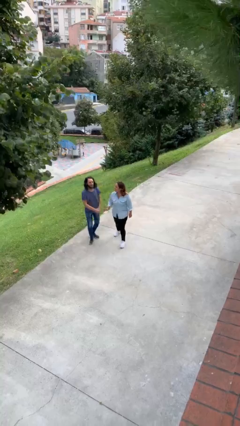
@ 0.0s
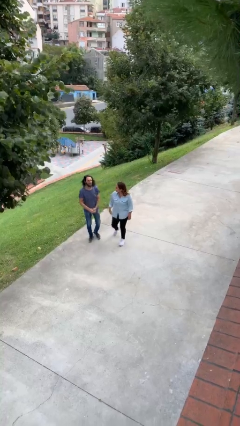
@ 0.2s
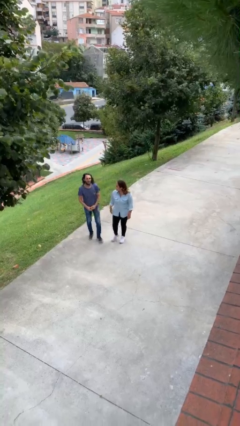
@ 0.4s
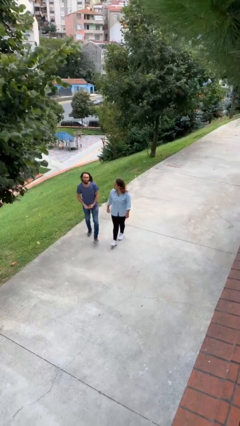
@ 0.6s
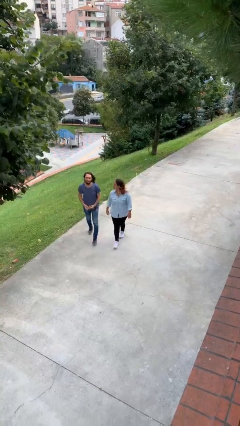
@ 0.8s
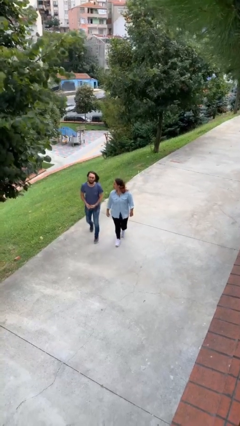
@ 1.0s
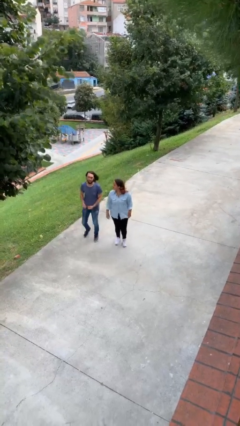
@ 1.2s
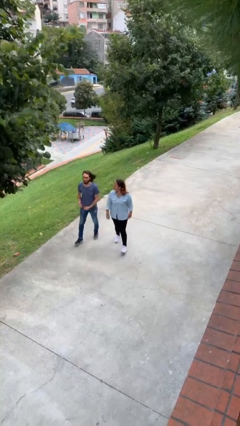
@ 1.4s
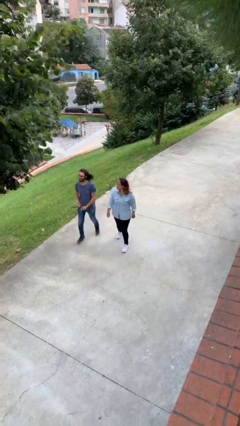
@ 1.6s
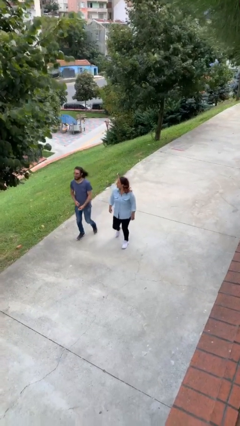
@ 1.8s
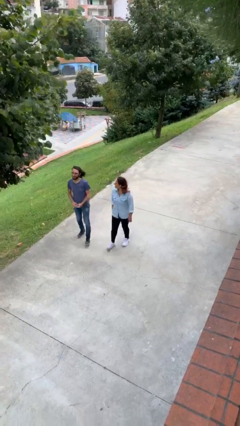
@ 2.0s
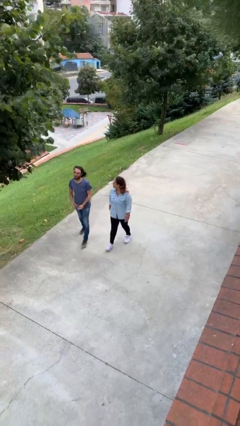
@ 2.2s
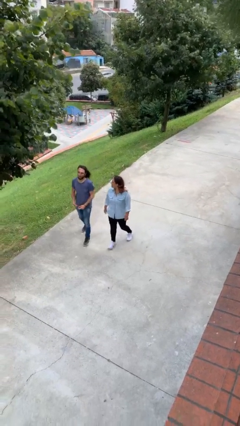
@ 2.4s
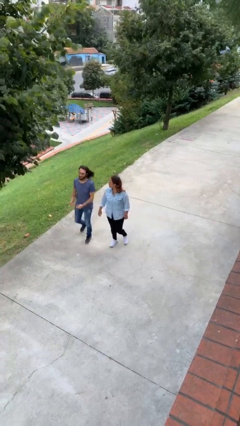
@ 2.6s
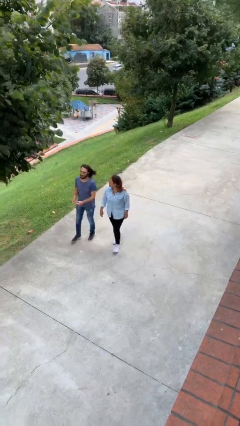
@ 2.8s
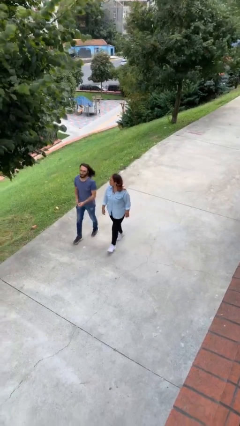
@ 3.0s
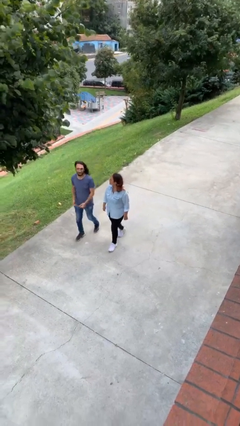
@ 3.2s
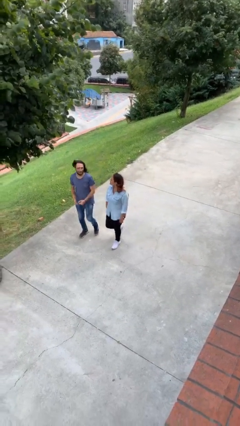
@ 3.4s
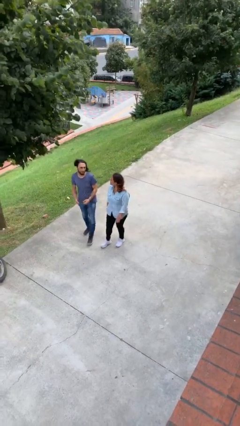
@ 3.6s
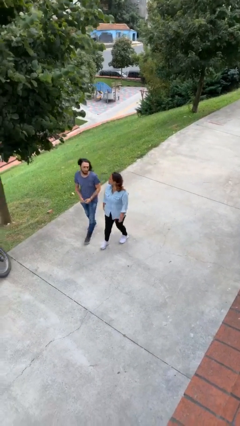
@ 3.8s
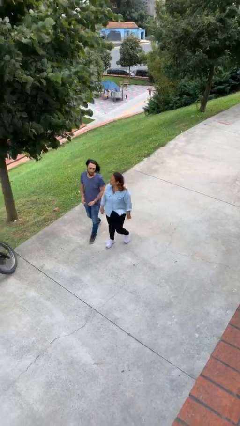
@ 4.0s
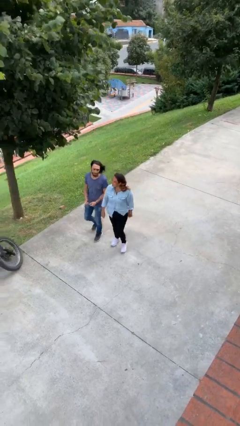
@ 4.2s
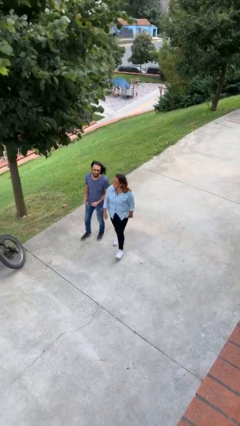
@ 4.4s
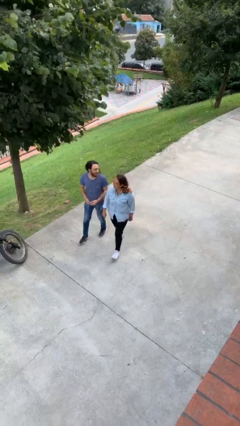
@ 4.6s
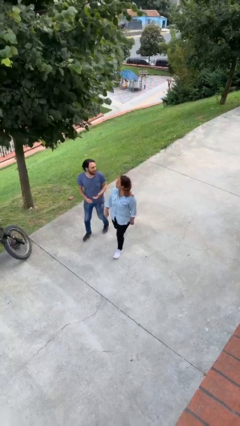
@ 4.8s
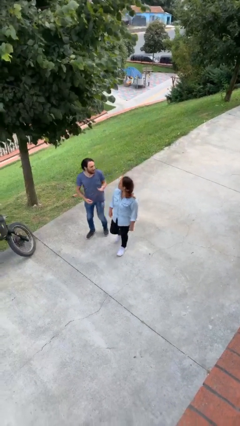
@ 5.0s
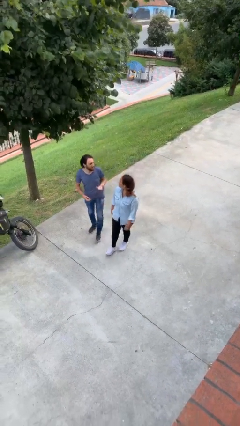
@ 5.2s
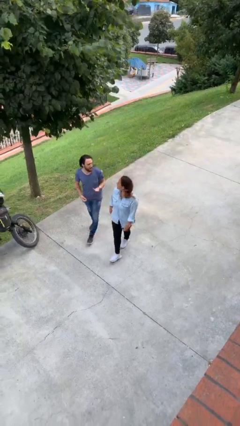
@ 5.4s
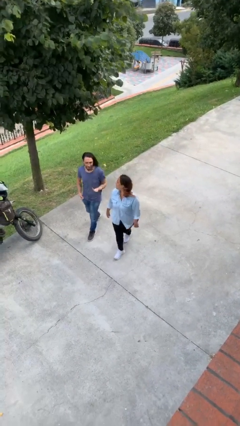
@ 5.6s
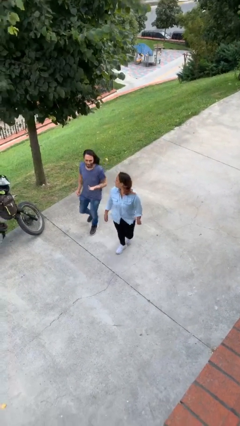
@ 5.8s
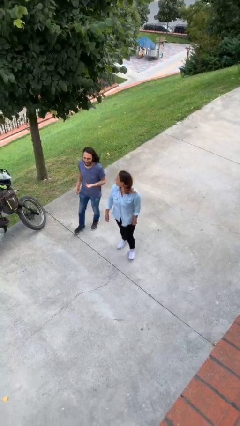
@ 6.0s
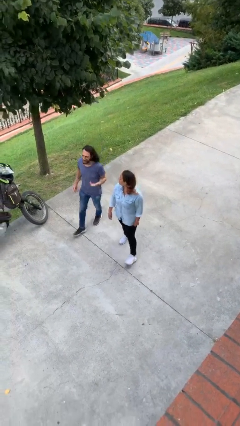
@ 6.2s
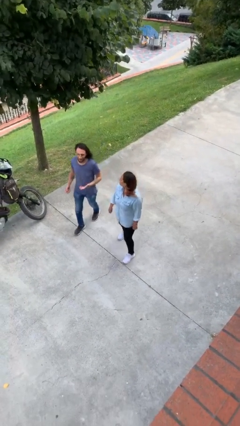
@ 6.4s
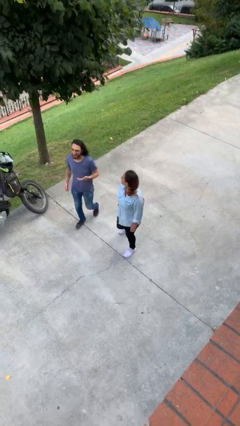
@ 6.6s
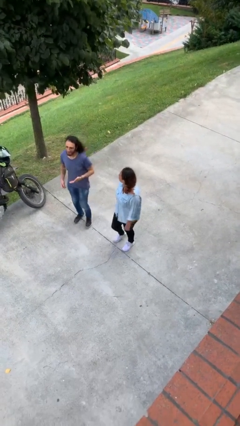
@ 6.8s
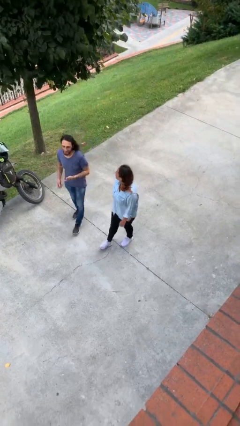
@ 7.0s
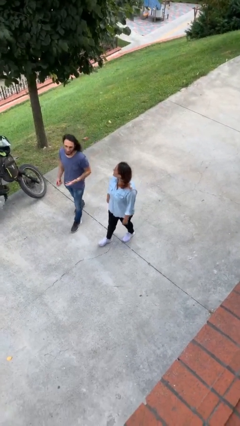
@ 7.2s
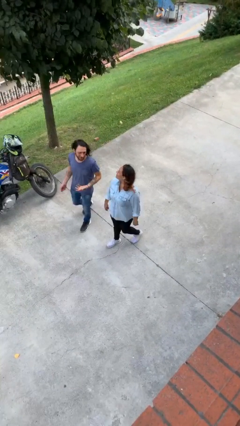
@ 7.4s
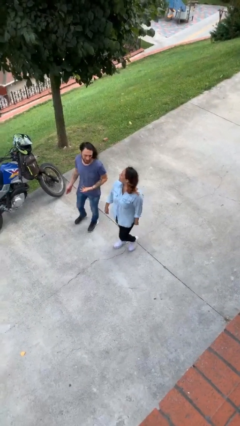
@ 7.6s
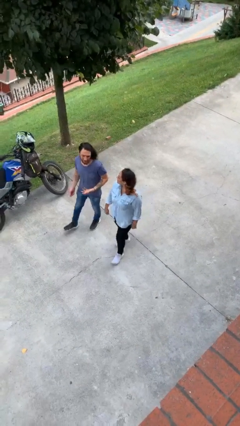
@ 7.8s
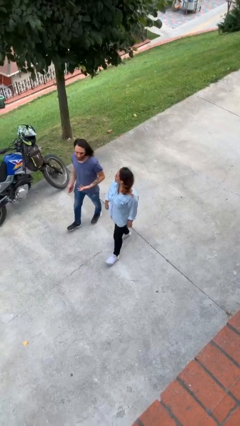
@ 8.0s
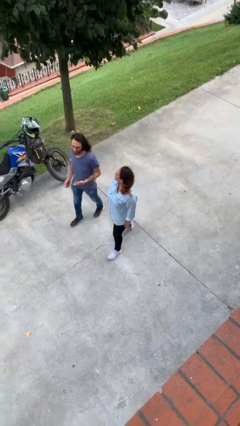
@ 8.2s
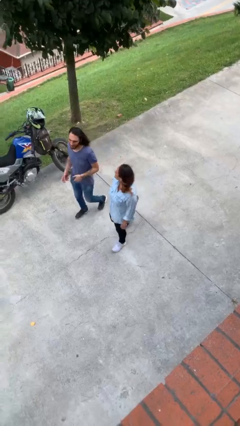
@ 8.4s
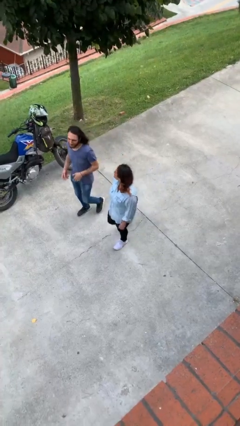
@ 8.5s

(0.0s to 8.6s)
person talks to person

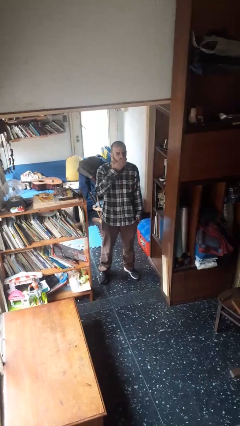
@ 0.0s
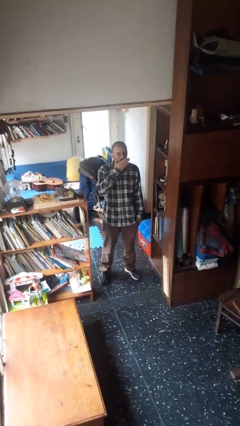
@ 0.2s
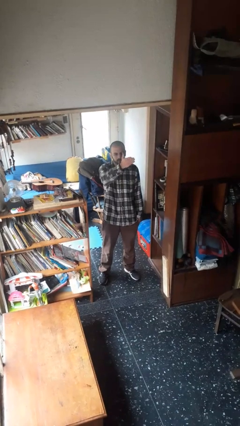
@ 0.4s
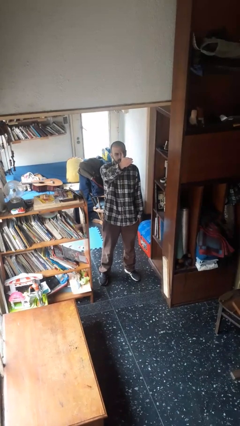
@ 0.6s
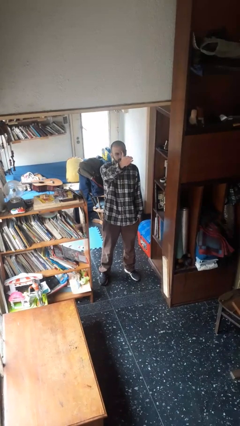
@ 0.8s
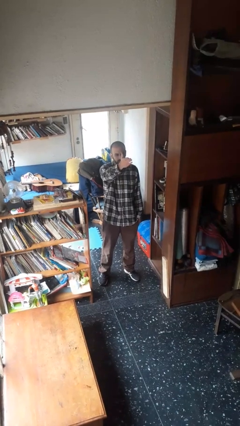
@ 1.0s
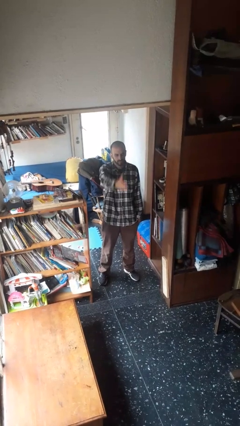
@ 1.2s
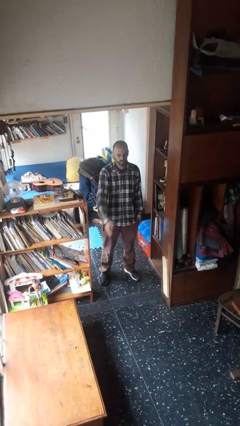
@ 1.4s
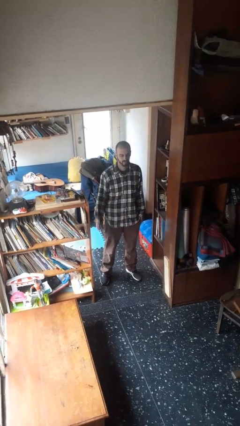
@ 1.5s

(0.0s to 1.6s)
person gestures blow kiss

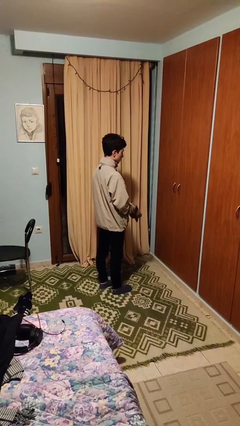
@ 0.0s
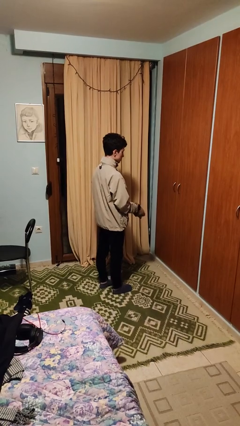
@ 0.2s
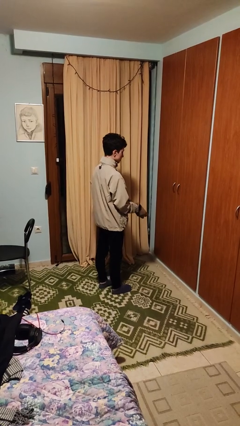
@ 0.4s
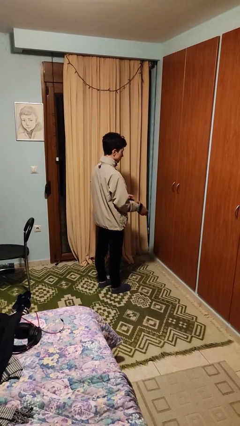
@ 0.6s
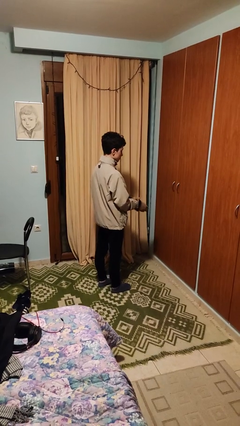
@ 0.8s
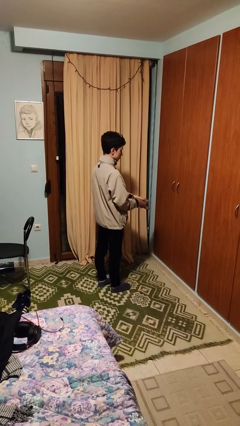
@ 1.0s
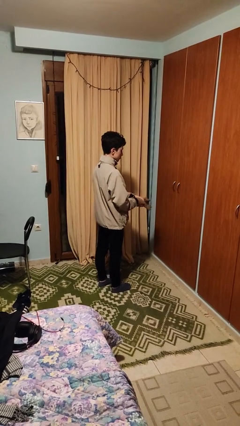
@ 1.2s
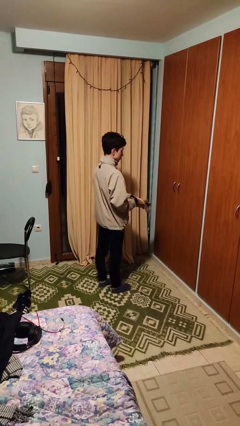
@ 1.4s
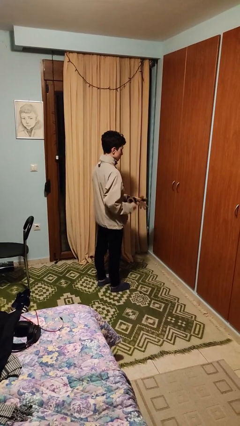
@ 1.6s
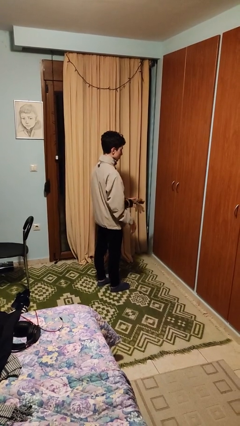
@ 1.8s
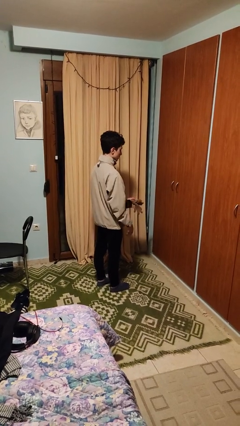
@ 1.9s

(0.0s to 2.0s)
person takes off gloves

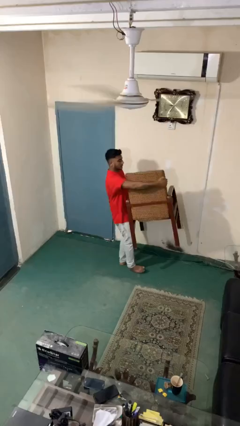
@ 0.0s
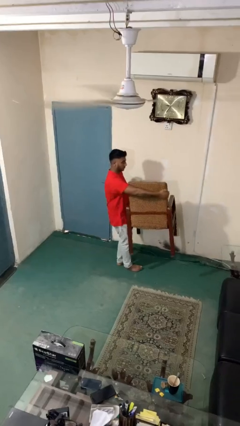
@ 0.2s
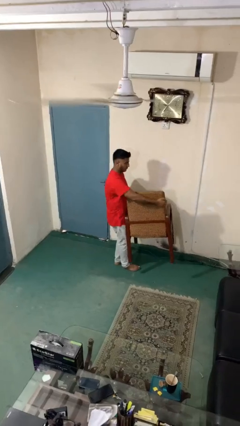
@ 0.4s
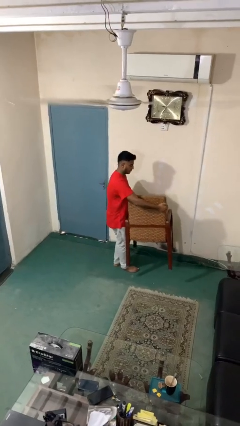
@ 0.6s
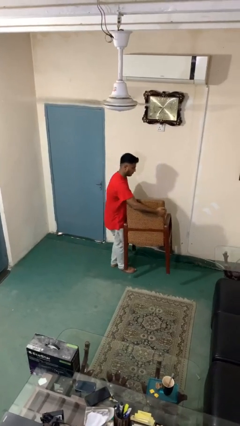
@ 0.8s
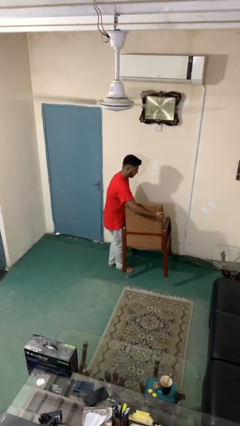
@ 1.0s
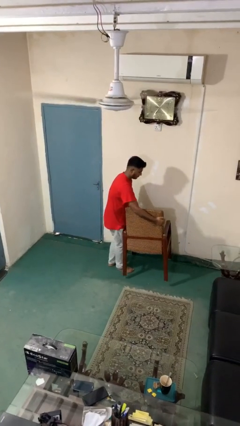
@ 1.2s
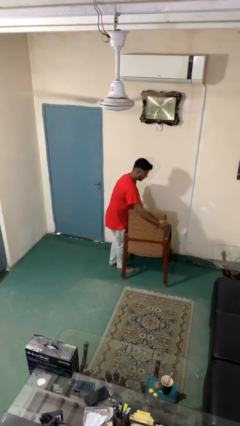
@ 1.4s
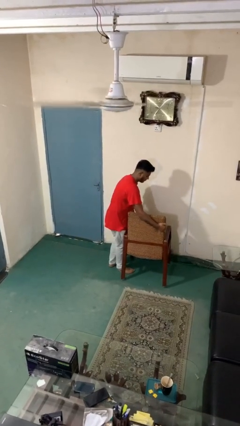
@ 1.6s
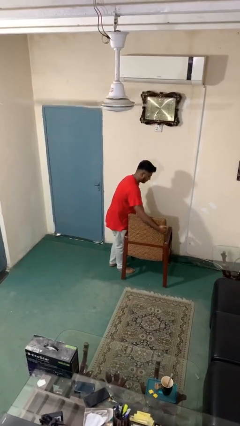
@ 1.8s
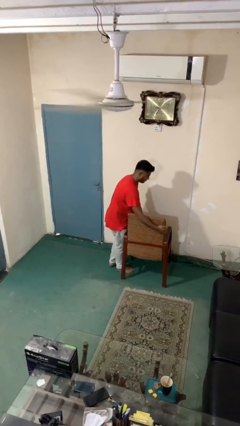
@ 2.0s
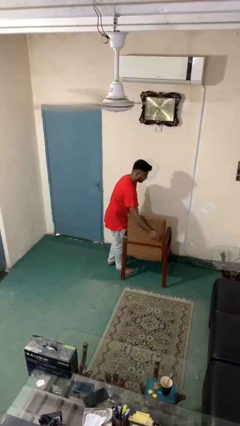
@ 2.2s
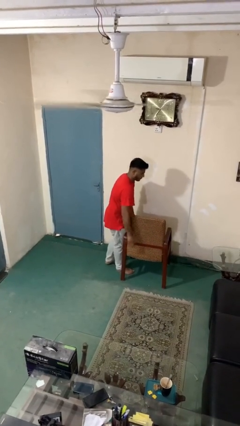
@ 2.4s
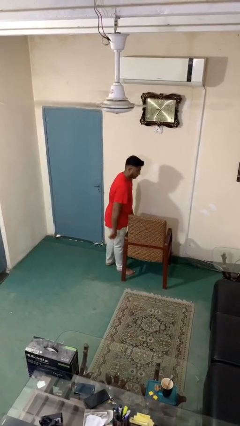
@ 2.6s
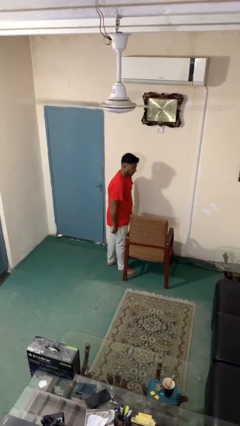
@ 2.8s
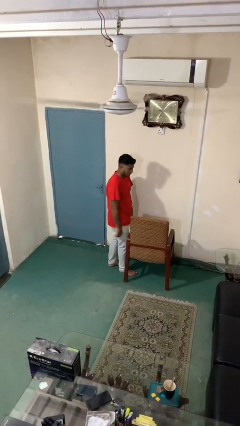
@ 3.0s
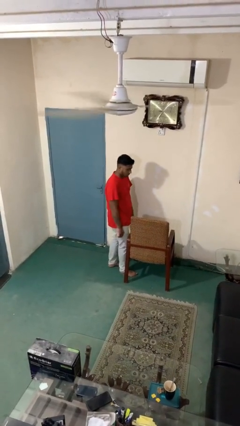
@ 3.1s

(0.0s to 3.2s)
person puts down object on floor

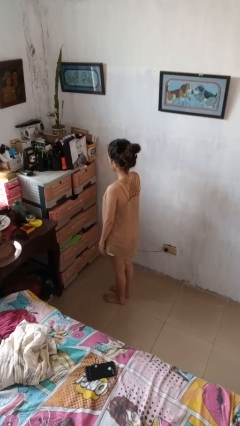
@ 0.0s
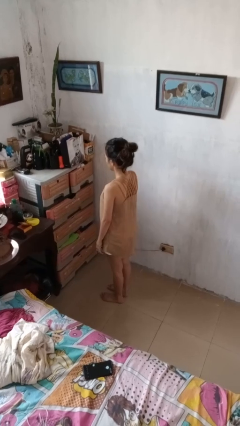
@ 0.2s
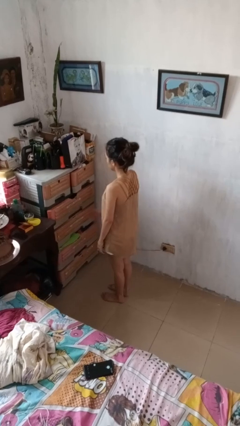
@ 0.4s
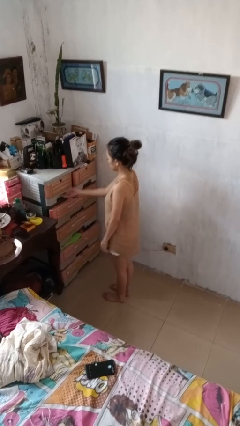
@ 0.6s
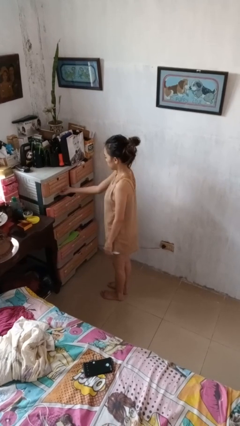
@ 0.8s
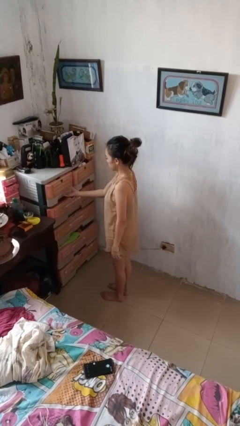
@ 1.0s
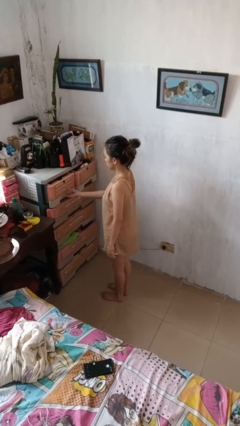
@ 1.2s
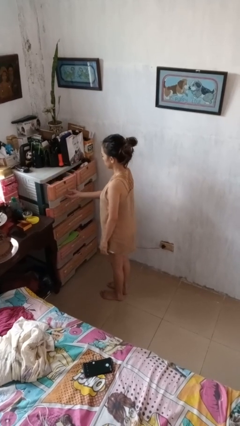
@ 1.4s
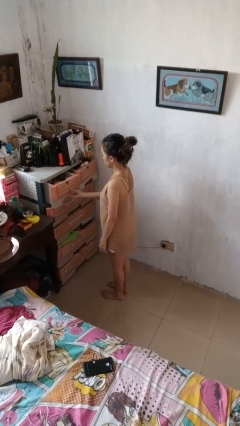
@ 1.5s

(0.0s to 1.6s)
person opens dresser drawer

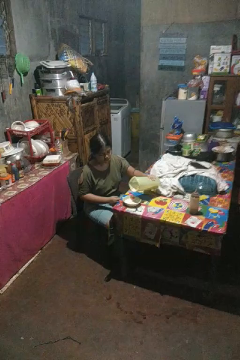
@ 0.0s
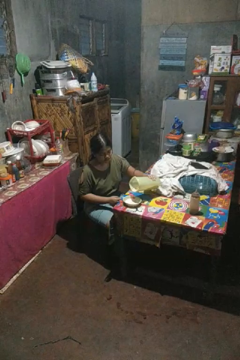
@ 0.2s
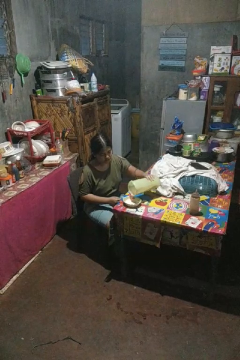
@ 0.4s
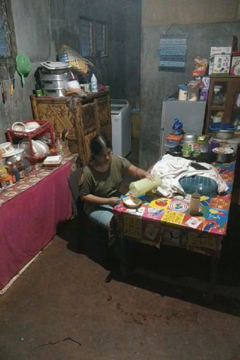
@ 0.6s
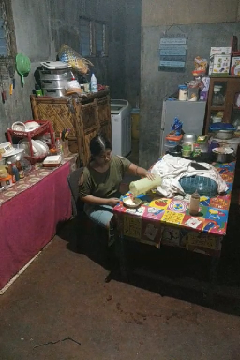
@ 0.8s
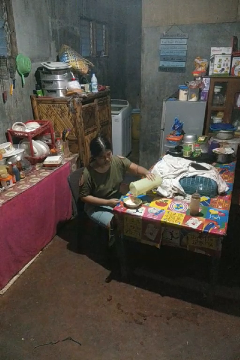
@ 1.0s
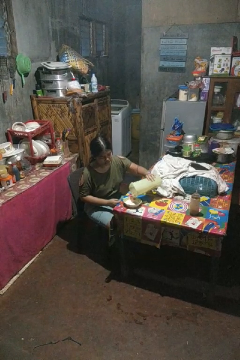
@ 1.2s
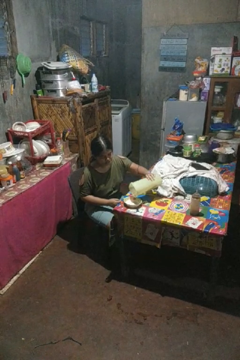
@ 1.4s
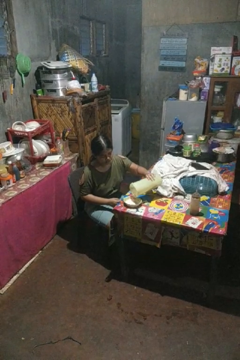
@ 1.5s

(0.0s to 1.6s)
person pours into bowl
